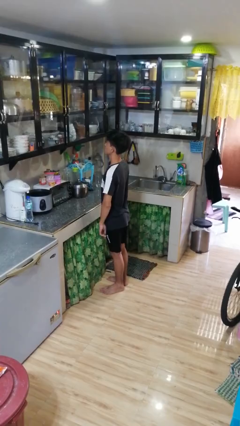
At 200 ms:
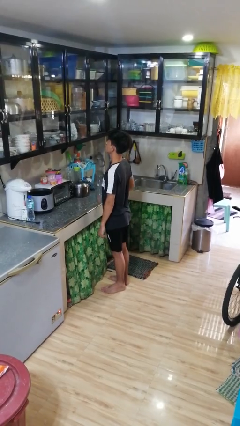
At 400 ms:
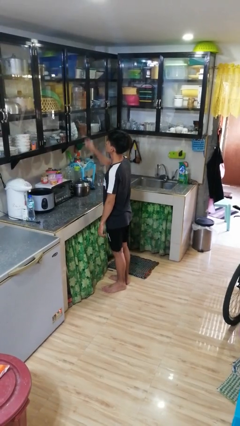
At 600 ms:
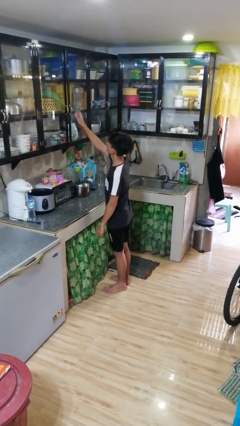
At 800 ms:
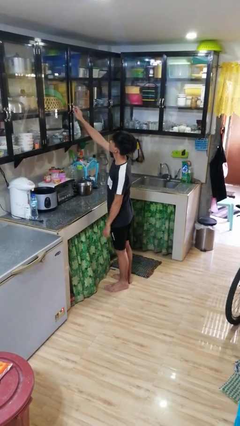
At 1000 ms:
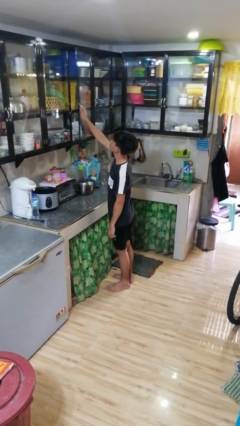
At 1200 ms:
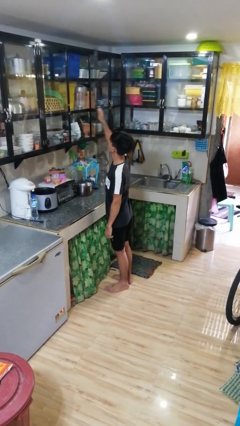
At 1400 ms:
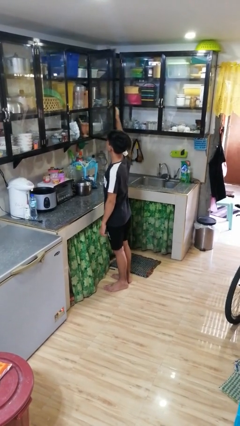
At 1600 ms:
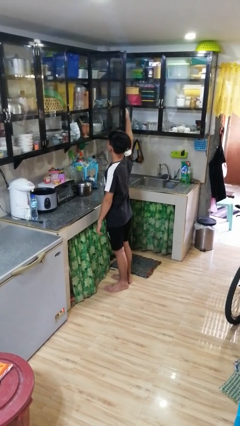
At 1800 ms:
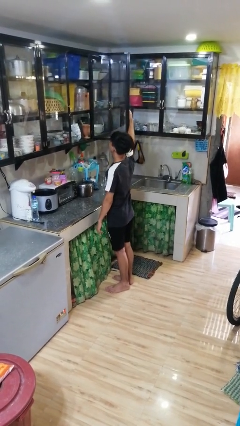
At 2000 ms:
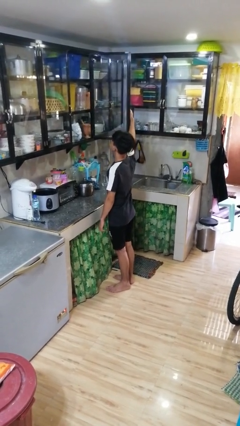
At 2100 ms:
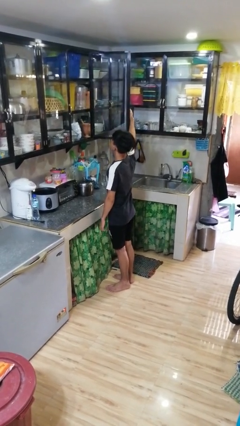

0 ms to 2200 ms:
person opens cabinet

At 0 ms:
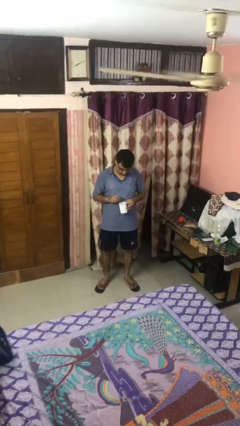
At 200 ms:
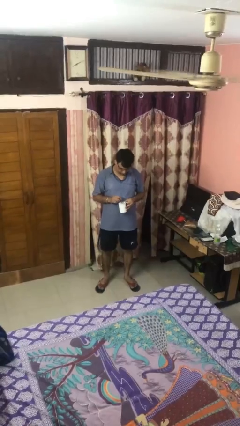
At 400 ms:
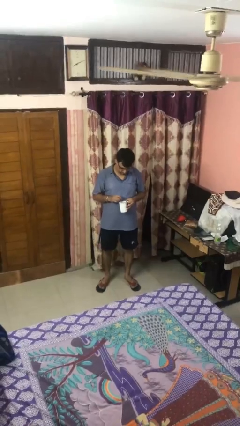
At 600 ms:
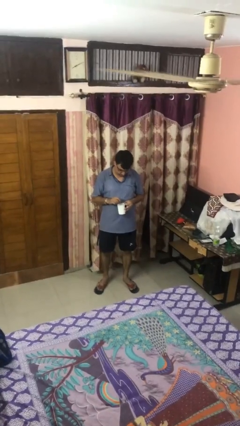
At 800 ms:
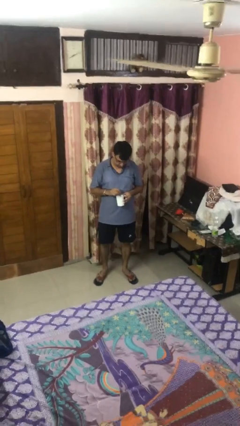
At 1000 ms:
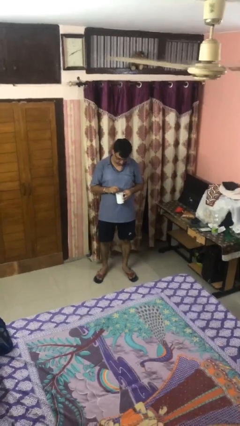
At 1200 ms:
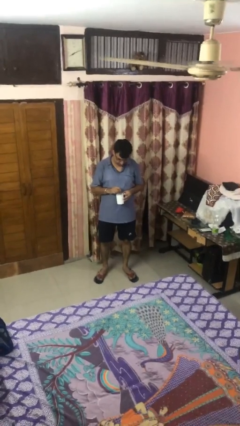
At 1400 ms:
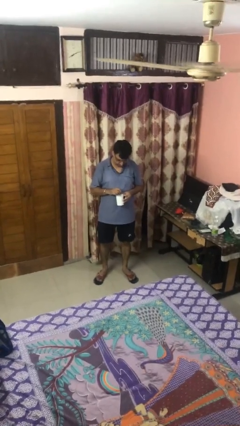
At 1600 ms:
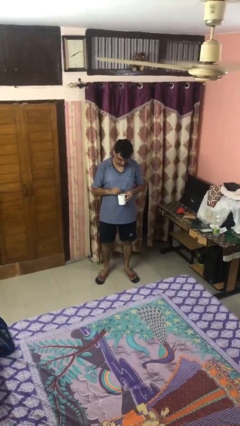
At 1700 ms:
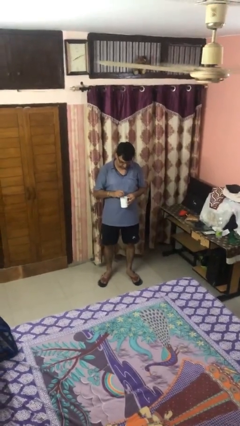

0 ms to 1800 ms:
person stirs mug

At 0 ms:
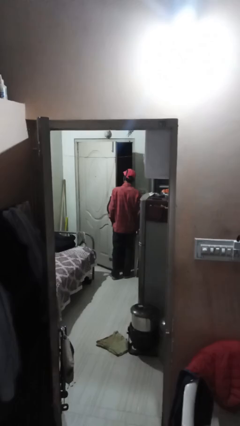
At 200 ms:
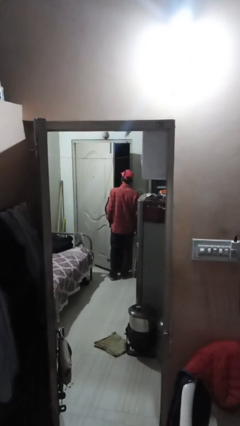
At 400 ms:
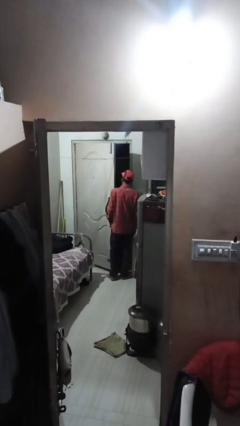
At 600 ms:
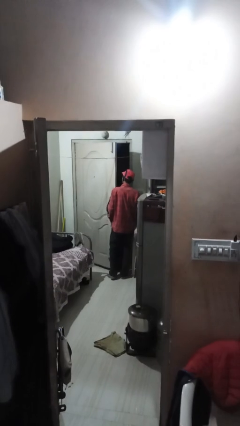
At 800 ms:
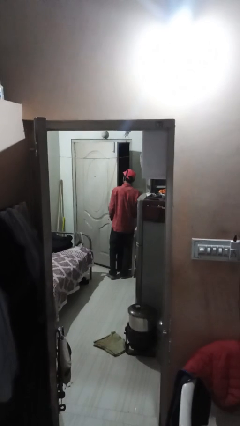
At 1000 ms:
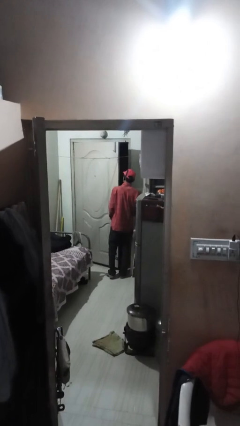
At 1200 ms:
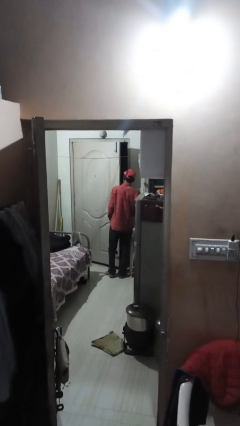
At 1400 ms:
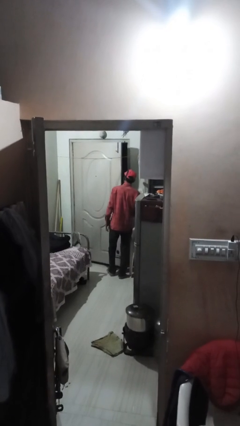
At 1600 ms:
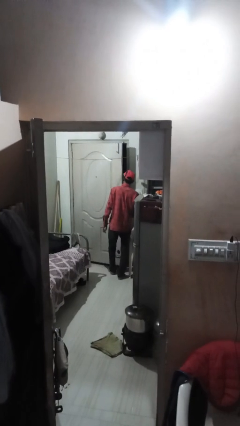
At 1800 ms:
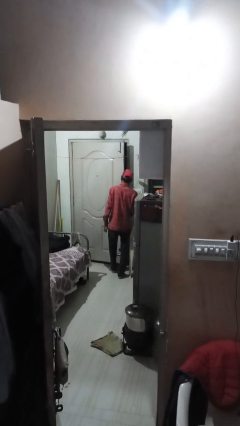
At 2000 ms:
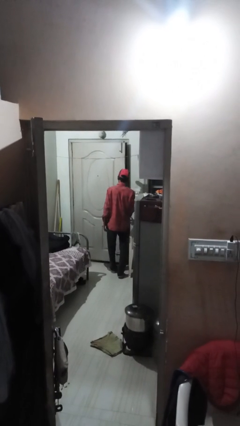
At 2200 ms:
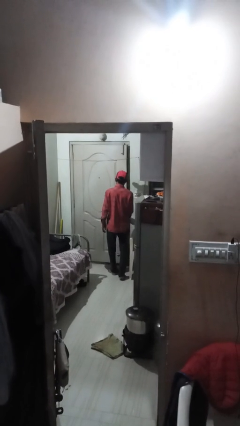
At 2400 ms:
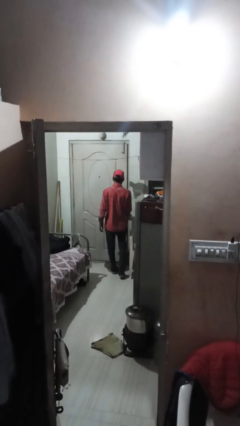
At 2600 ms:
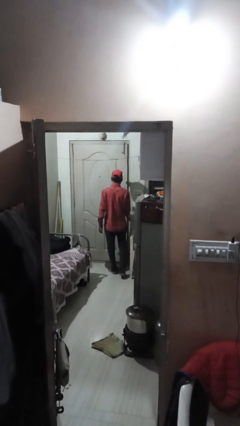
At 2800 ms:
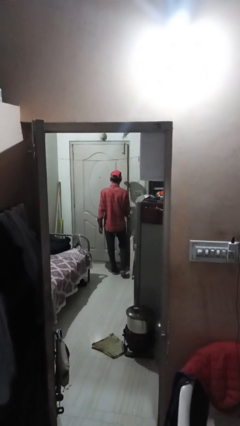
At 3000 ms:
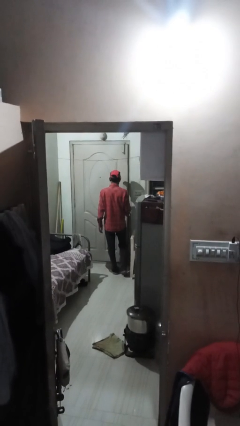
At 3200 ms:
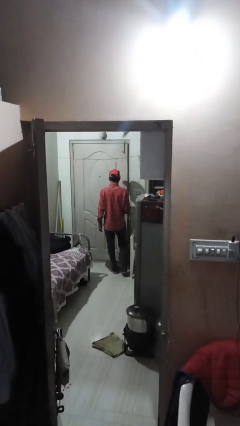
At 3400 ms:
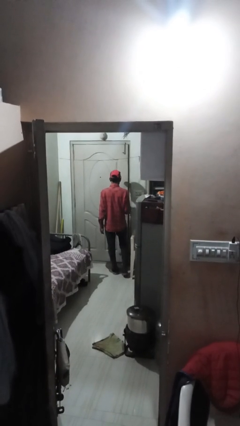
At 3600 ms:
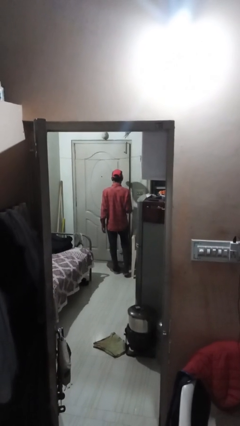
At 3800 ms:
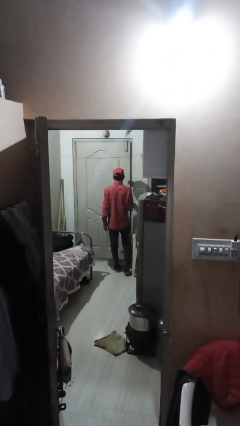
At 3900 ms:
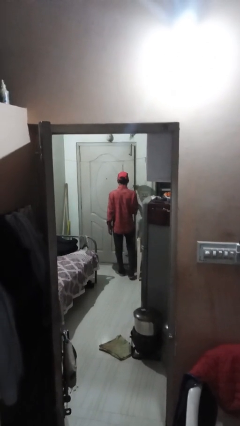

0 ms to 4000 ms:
person closes facility door

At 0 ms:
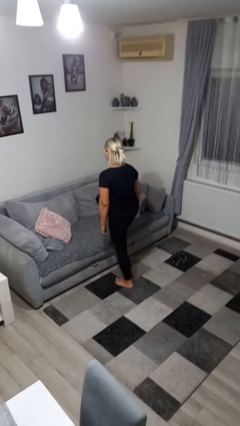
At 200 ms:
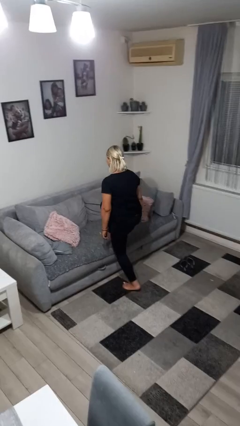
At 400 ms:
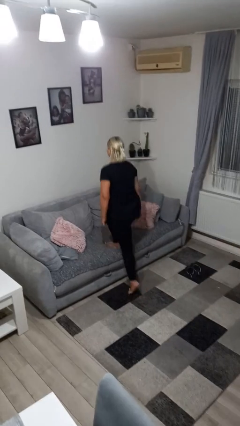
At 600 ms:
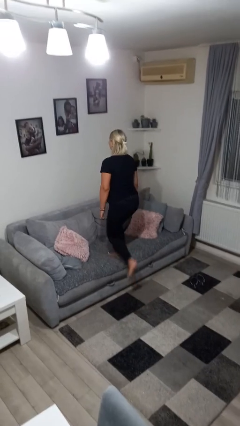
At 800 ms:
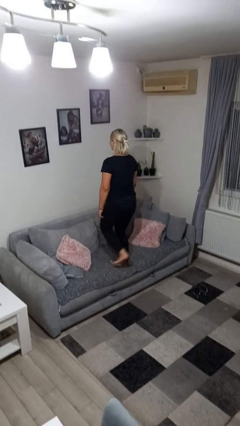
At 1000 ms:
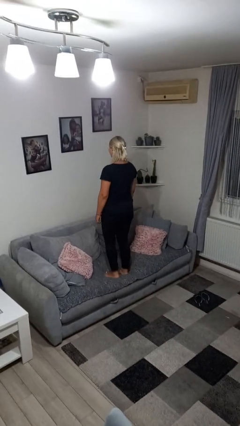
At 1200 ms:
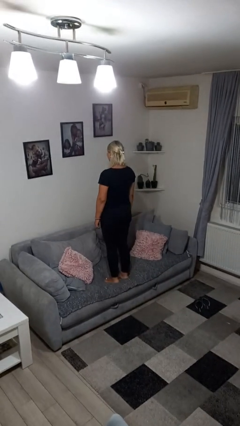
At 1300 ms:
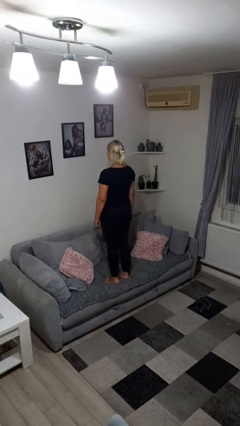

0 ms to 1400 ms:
person climbs on couch

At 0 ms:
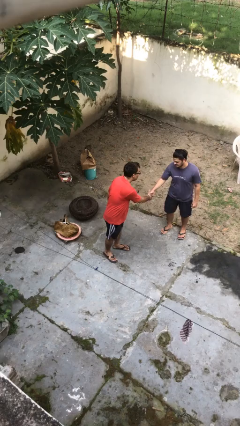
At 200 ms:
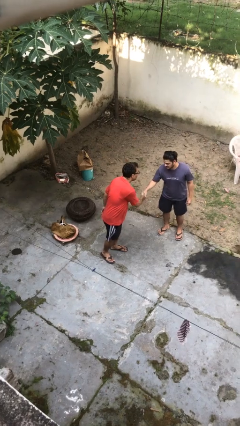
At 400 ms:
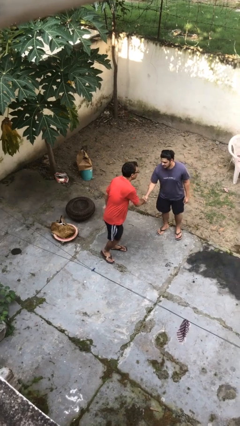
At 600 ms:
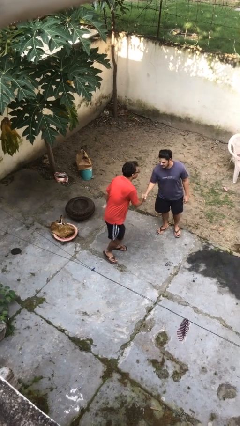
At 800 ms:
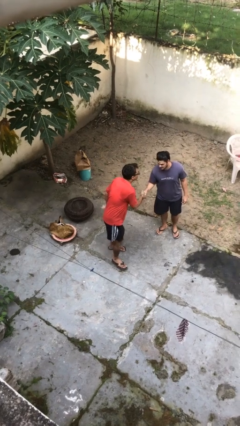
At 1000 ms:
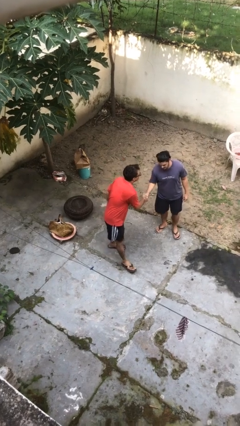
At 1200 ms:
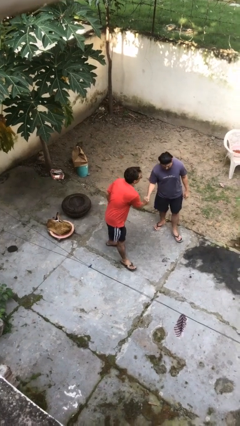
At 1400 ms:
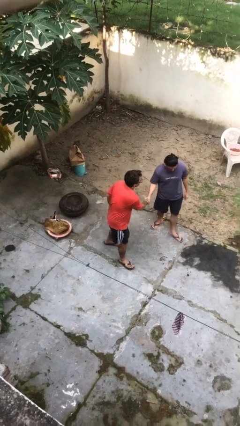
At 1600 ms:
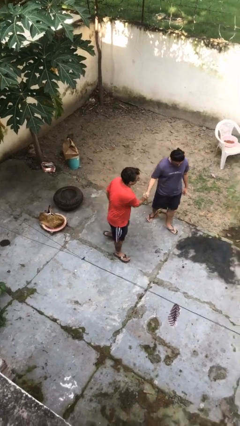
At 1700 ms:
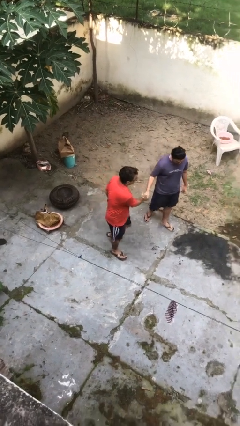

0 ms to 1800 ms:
person shakes hand

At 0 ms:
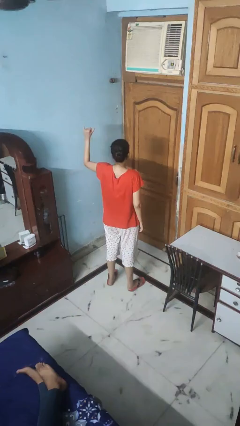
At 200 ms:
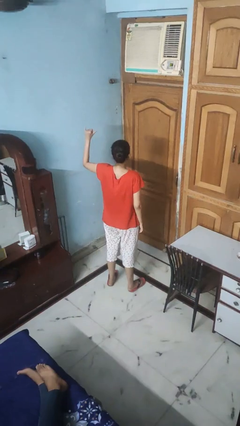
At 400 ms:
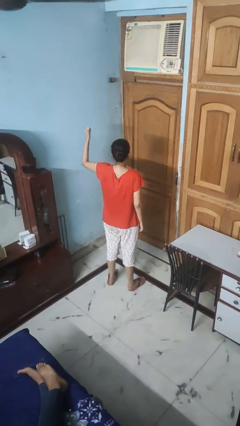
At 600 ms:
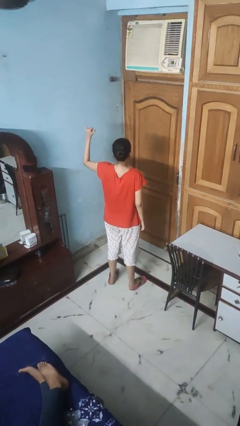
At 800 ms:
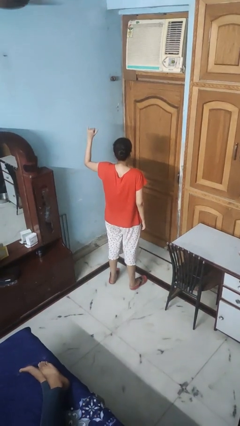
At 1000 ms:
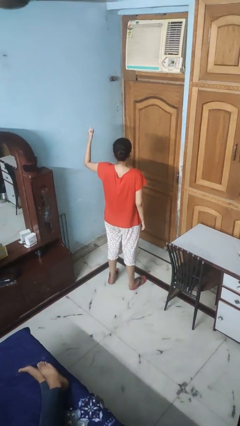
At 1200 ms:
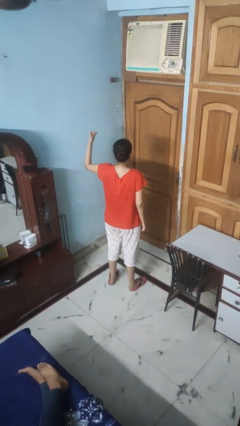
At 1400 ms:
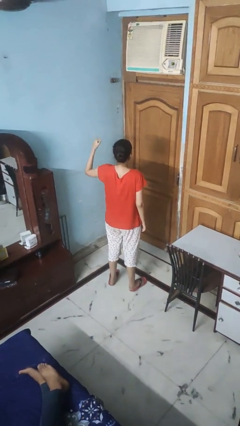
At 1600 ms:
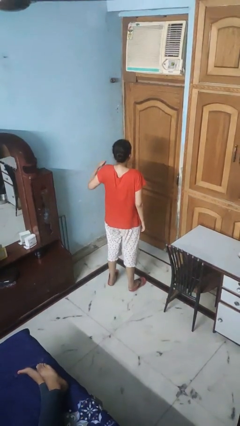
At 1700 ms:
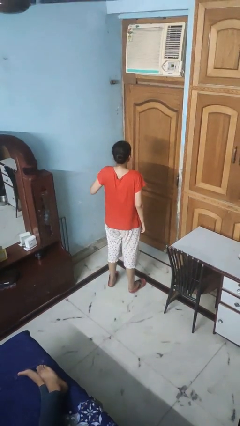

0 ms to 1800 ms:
person gestures hang loose

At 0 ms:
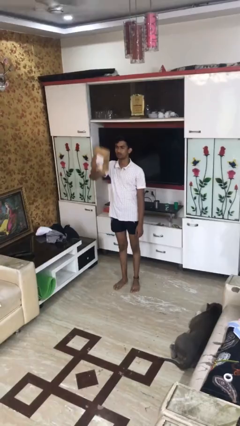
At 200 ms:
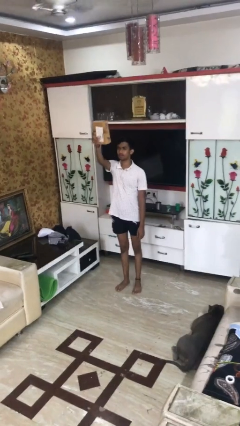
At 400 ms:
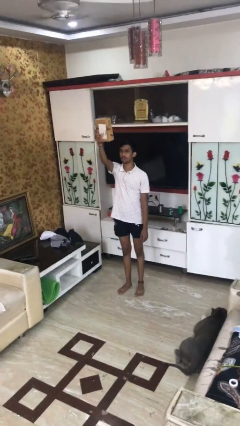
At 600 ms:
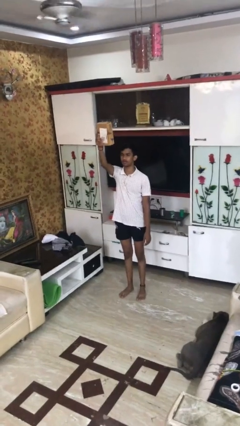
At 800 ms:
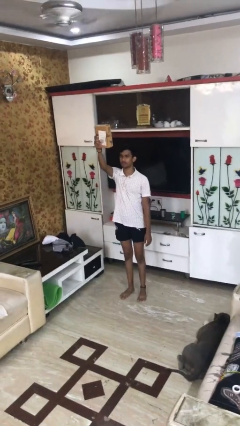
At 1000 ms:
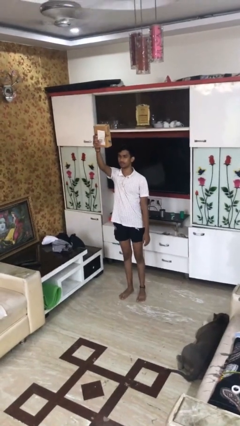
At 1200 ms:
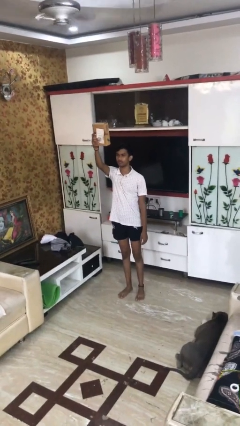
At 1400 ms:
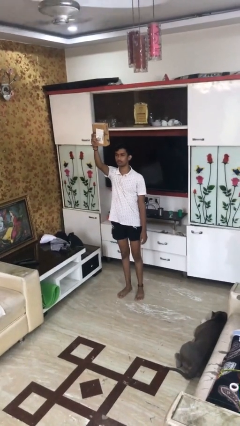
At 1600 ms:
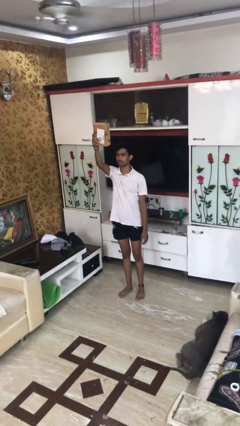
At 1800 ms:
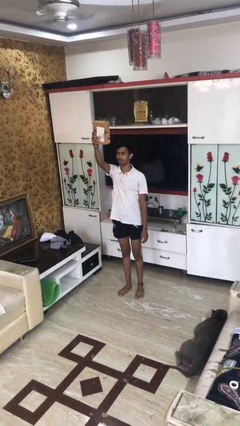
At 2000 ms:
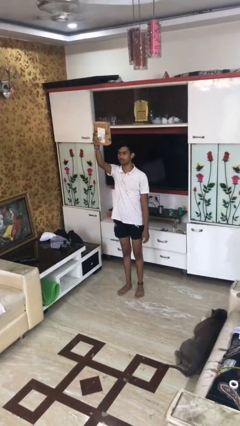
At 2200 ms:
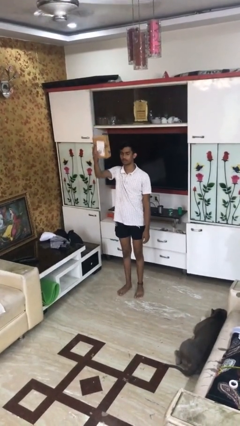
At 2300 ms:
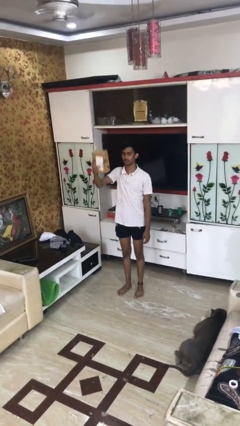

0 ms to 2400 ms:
person holds object above head

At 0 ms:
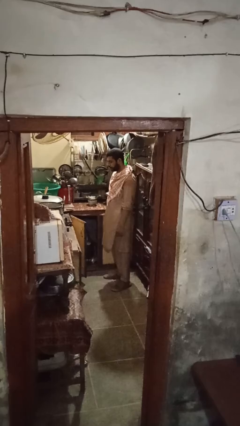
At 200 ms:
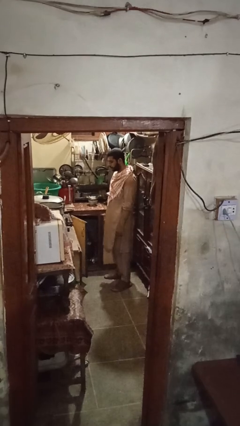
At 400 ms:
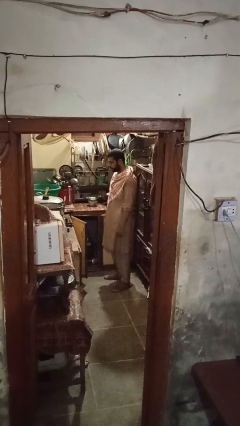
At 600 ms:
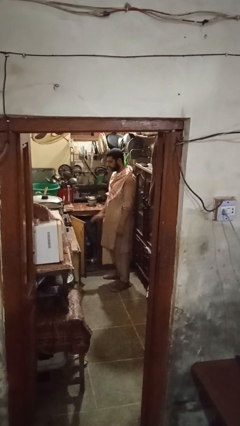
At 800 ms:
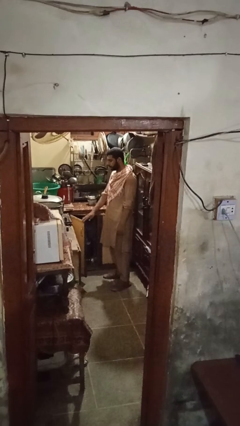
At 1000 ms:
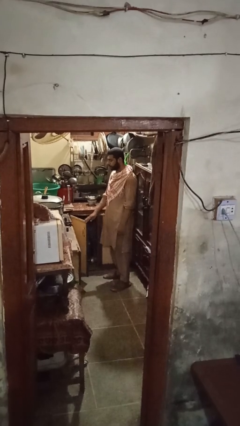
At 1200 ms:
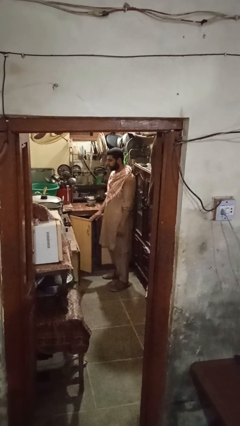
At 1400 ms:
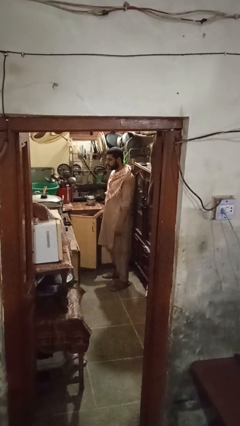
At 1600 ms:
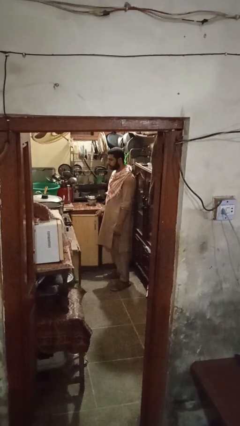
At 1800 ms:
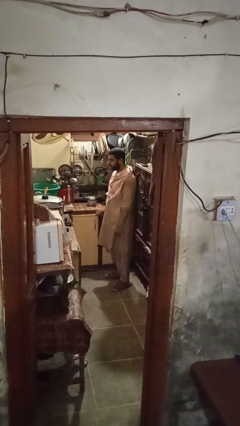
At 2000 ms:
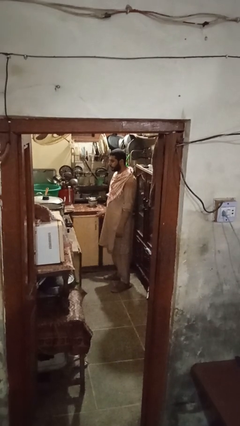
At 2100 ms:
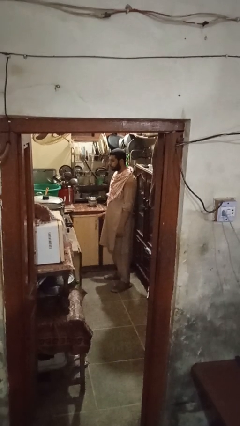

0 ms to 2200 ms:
person closes cabinet
